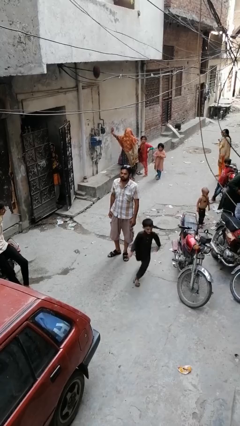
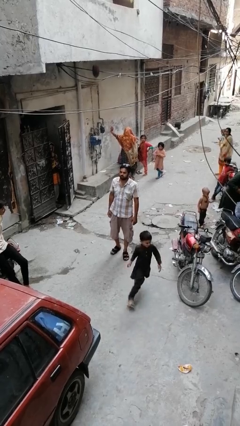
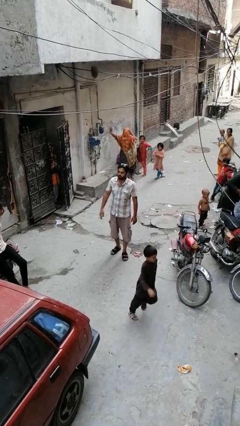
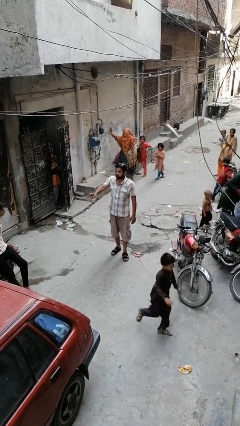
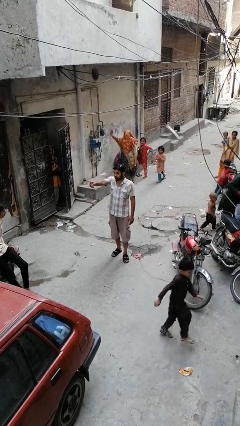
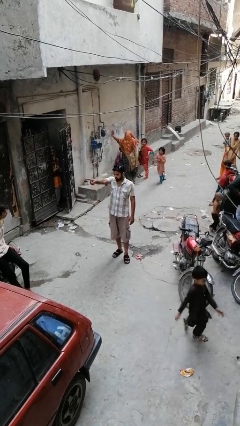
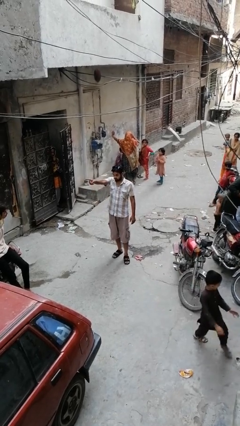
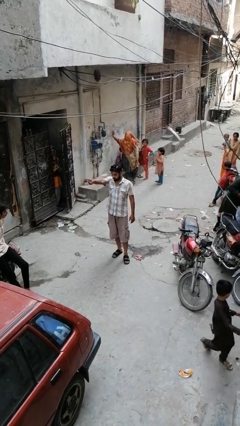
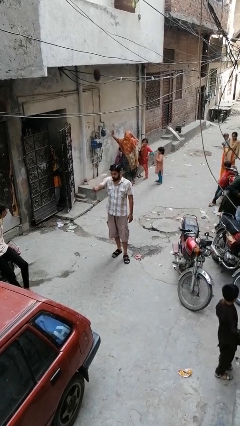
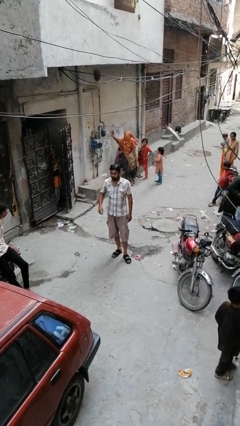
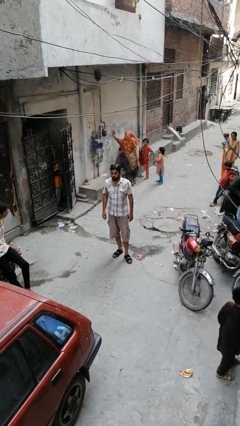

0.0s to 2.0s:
person points at person

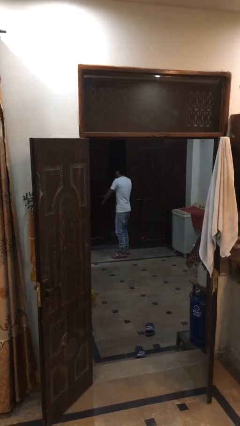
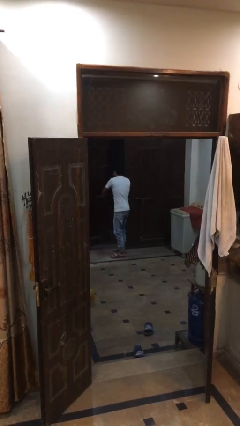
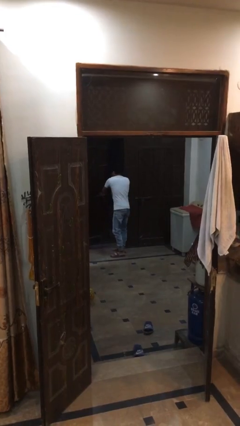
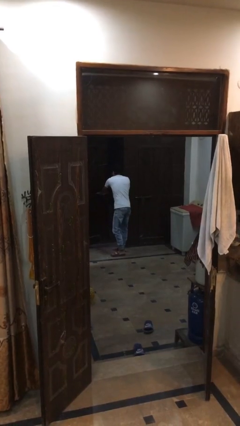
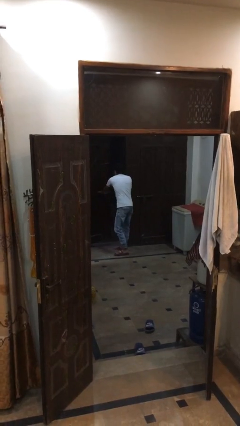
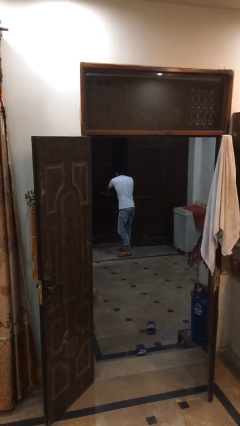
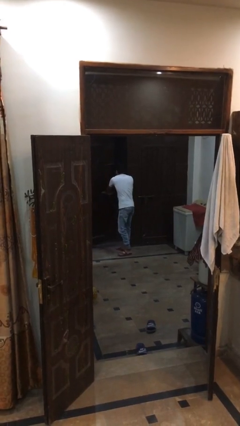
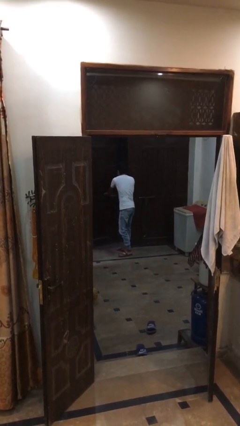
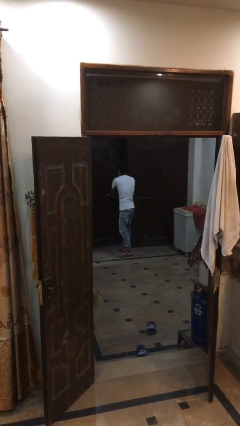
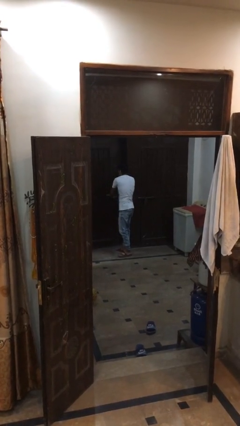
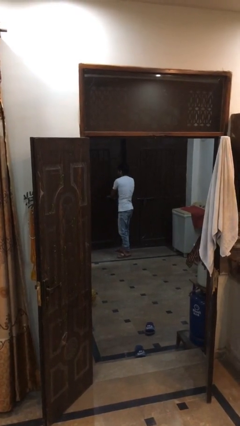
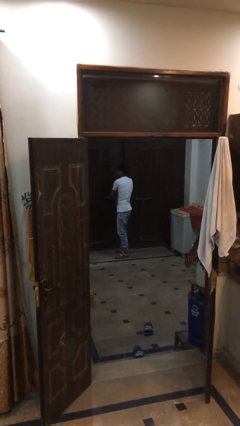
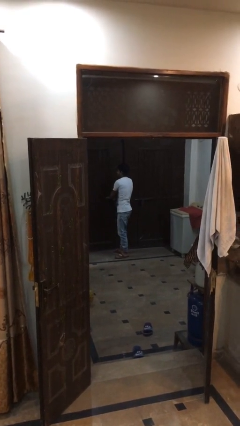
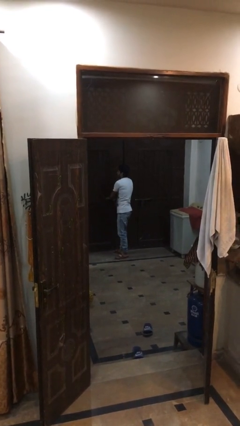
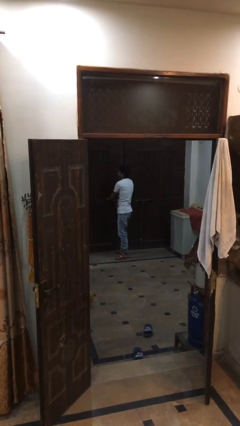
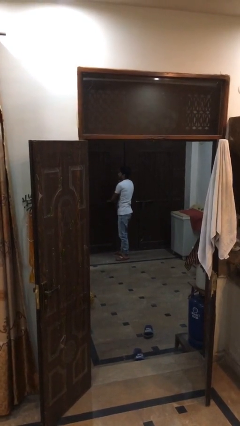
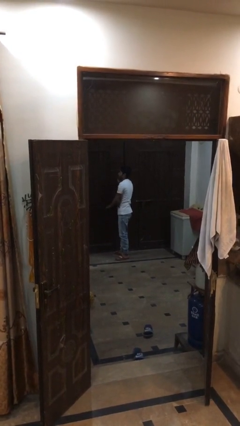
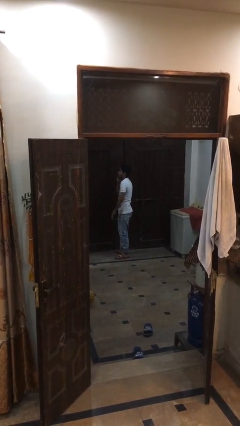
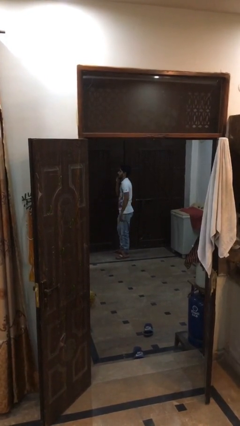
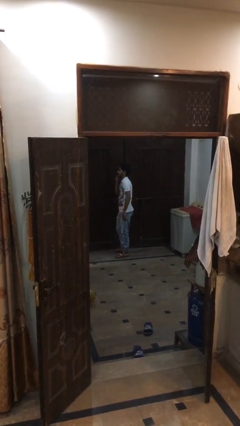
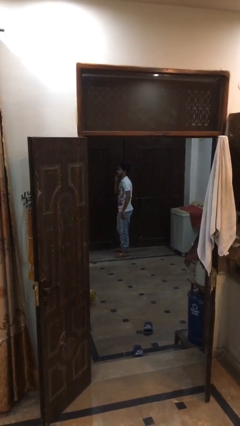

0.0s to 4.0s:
person closes facility door

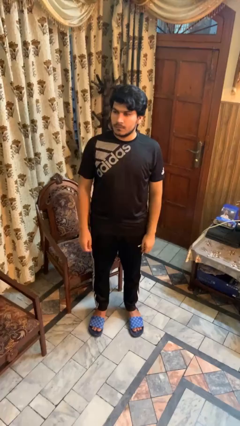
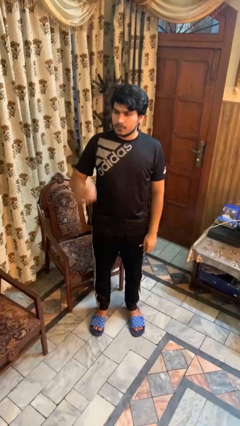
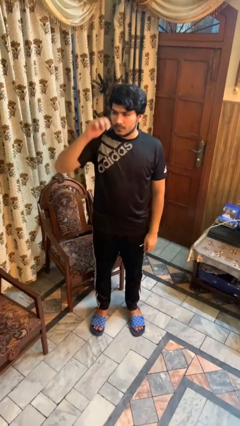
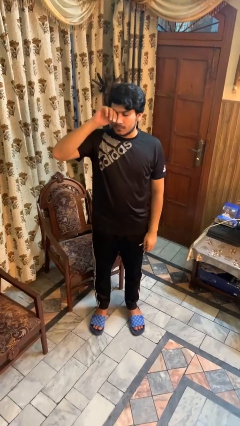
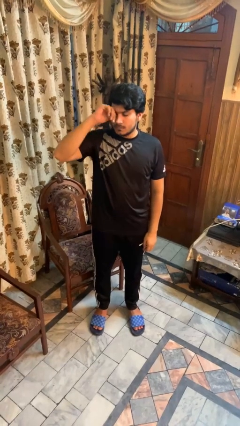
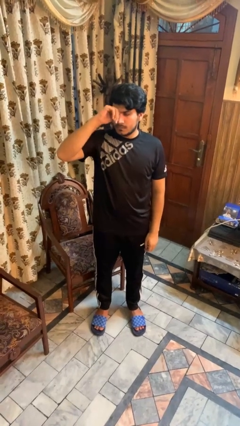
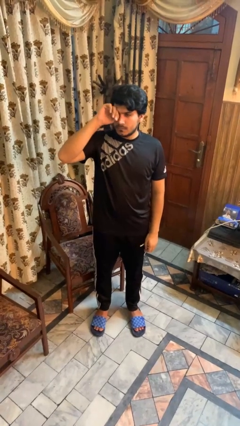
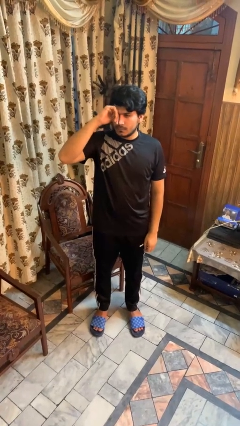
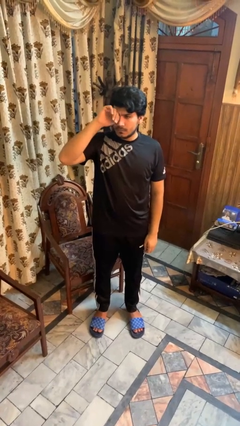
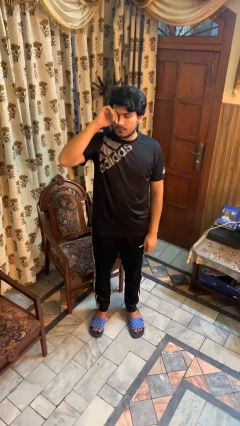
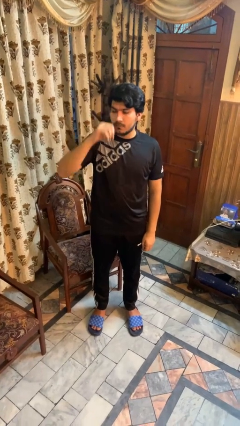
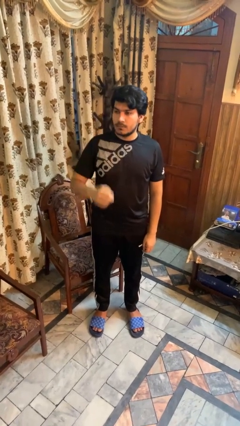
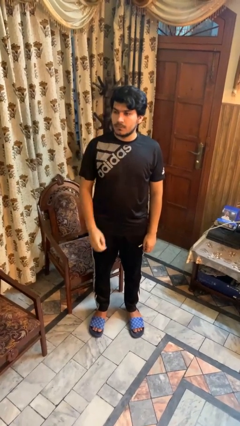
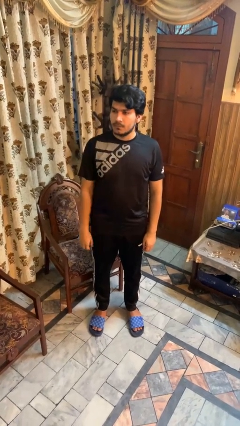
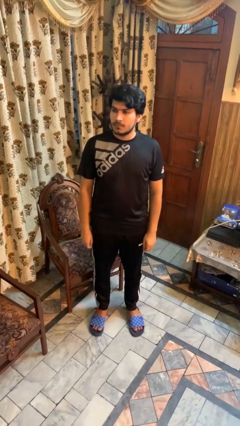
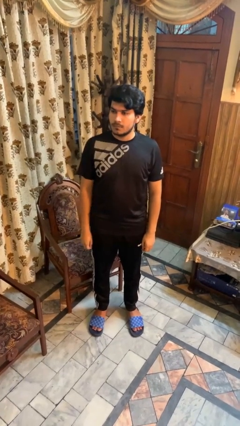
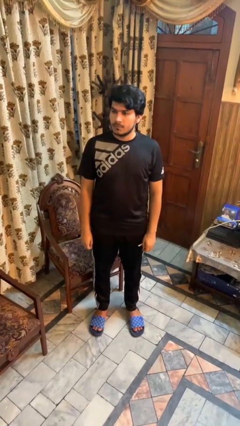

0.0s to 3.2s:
person rubs eyes

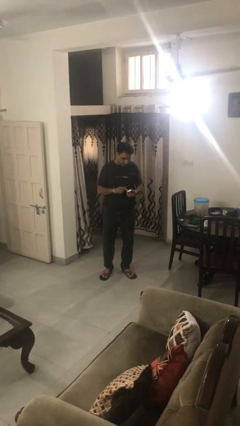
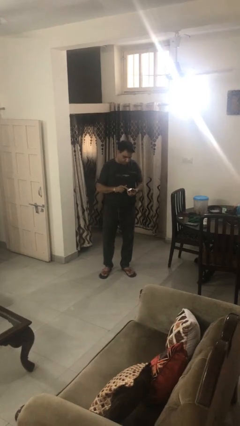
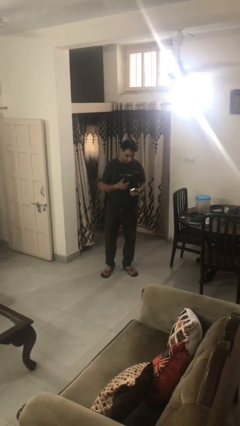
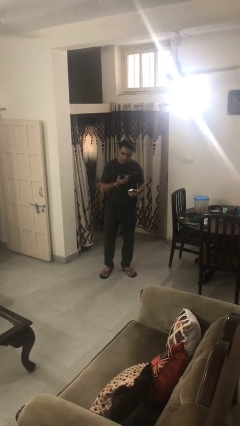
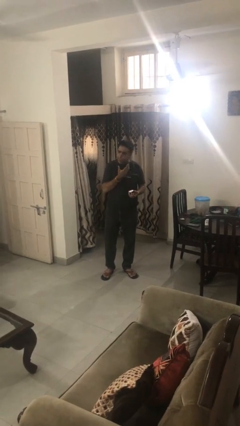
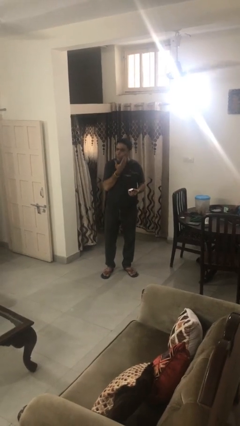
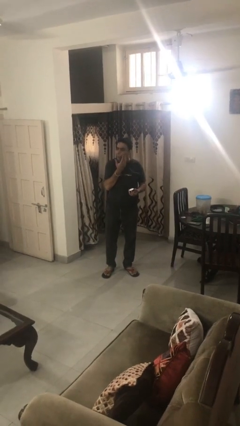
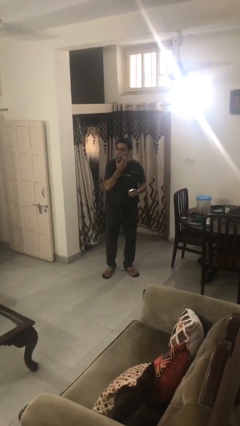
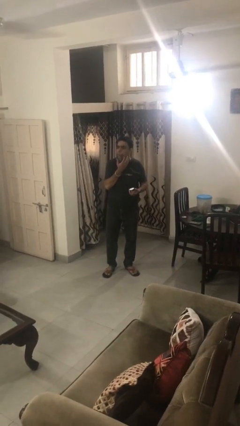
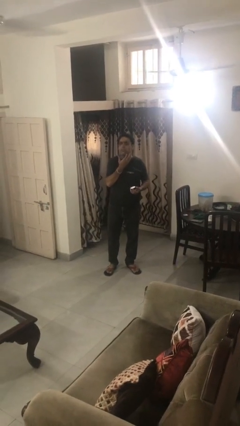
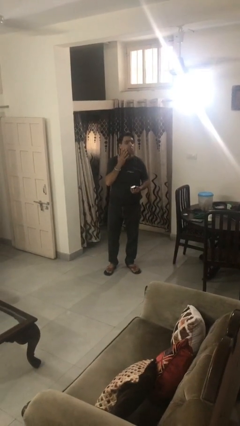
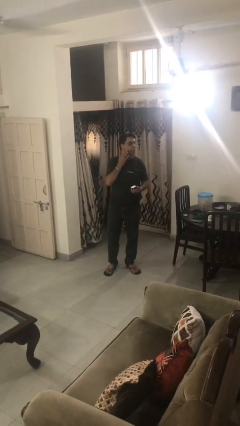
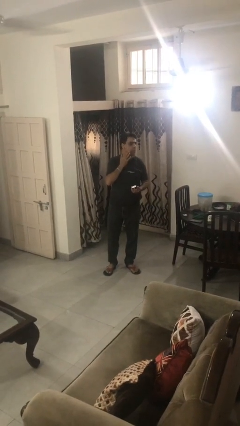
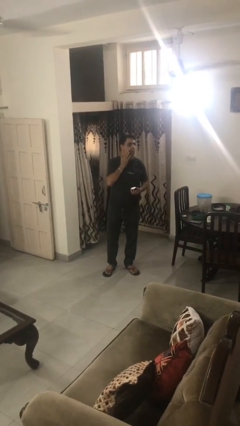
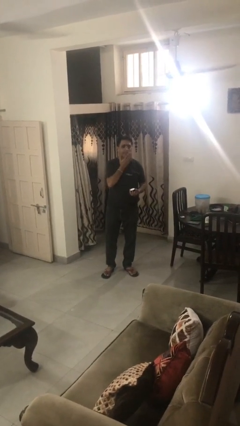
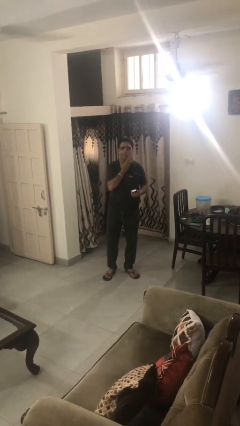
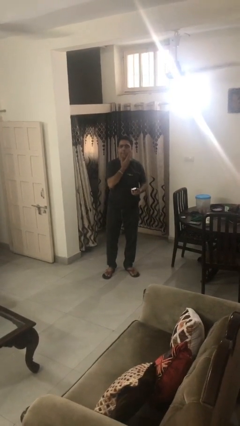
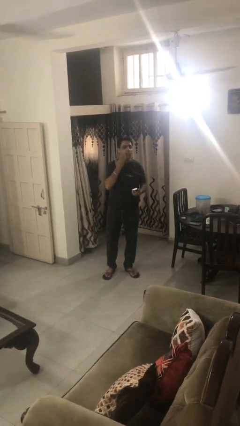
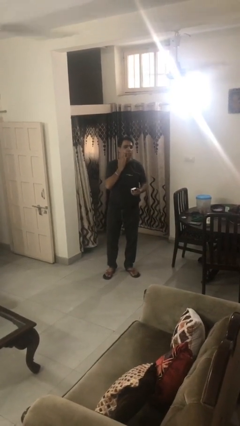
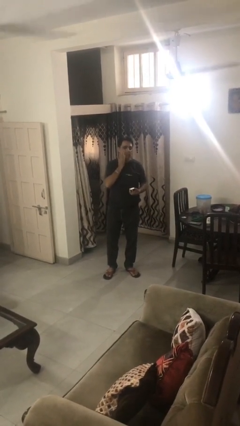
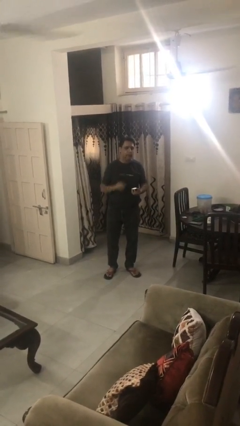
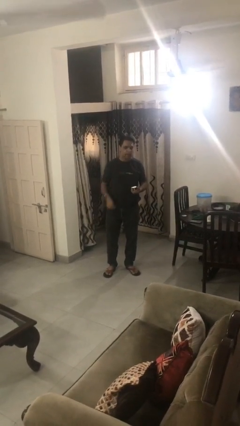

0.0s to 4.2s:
person applies facial moisturizer

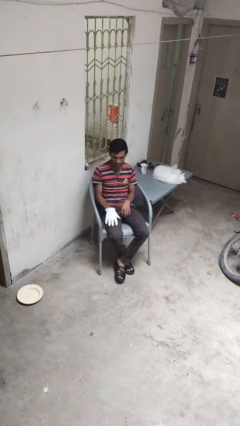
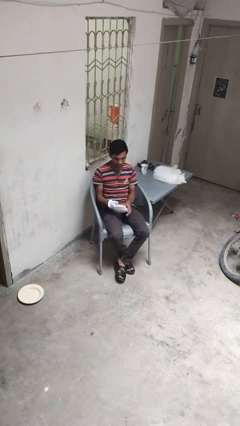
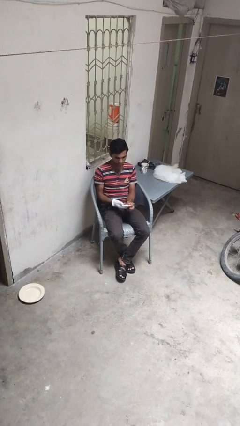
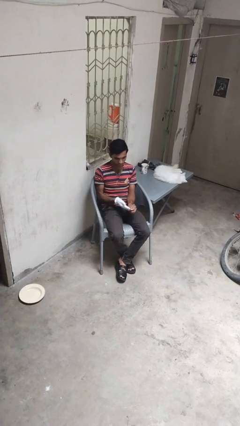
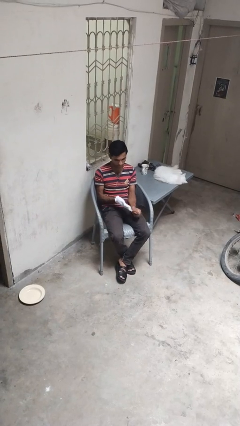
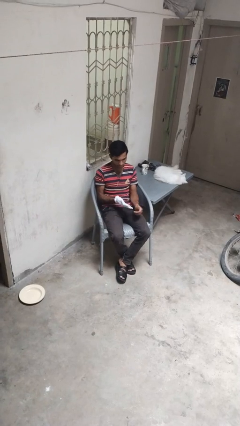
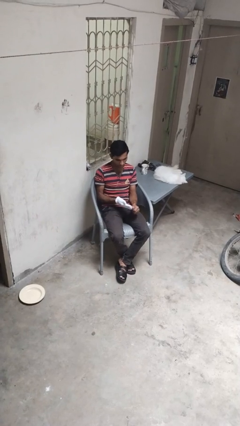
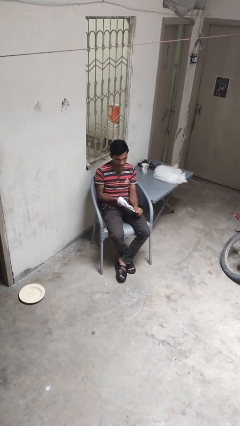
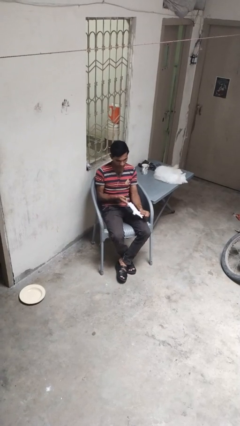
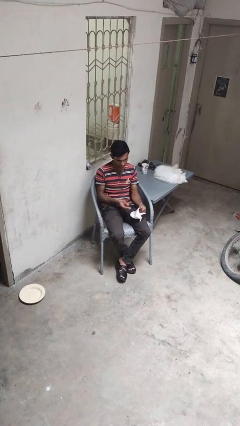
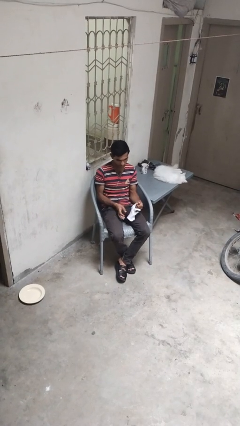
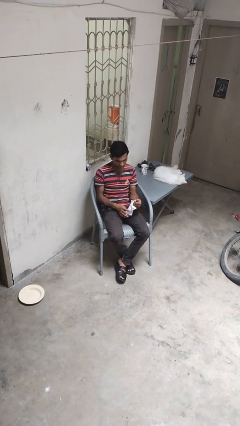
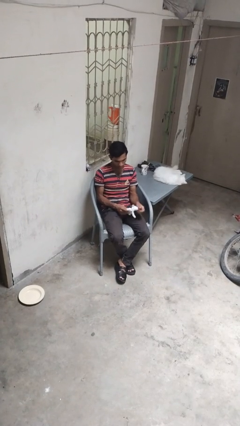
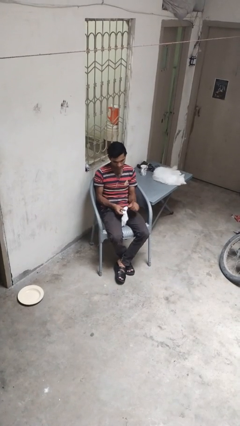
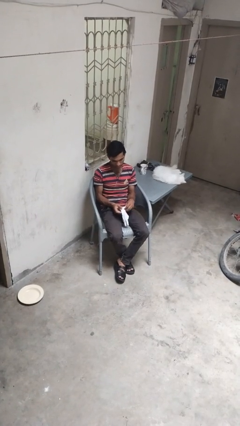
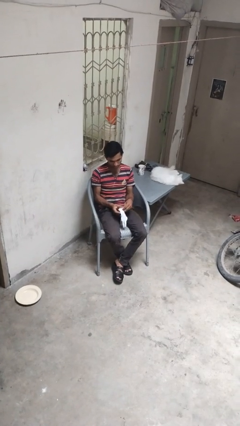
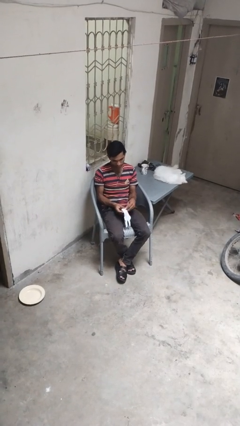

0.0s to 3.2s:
person takes off gloves

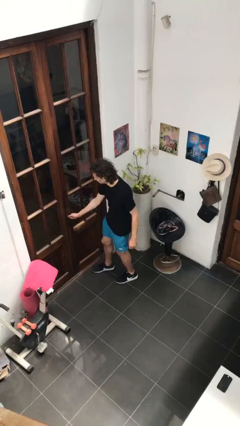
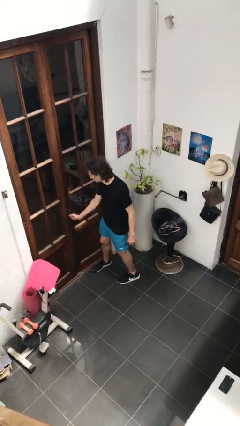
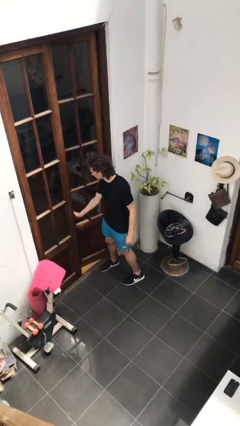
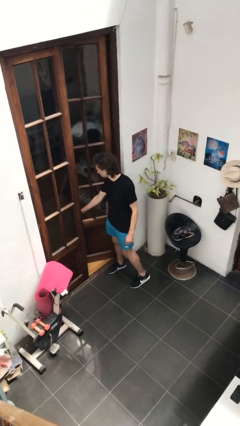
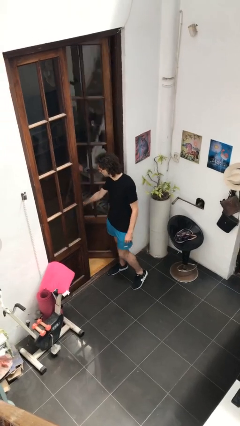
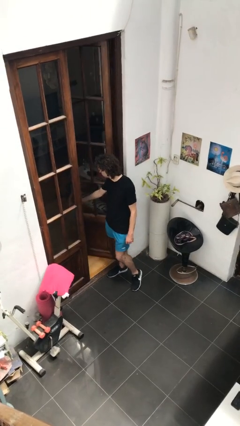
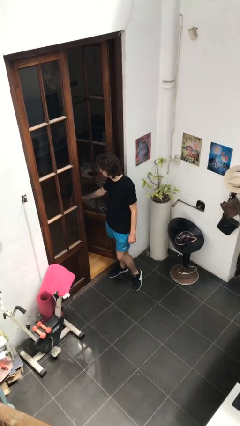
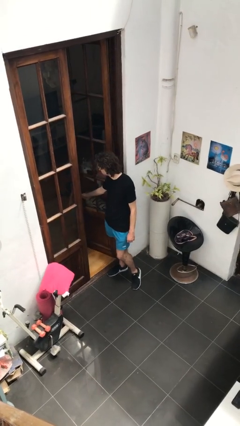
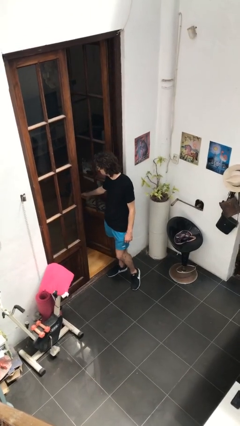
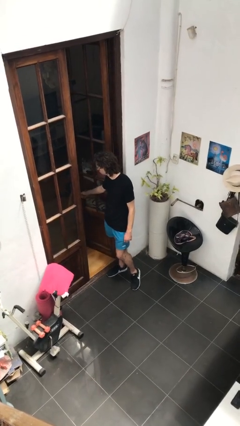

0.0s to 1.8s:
person opens facility door
